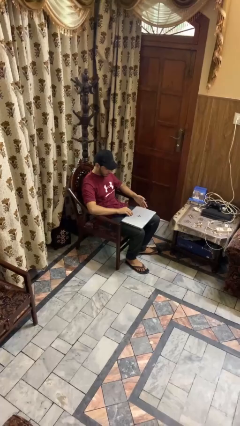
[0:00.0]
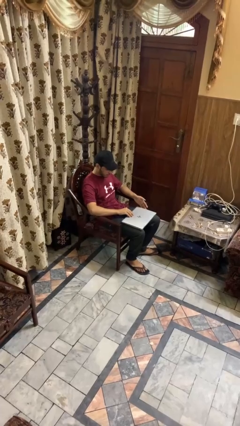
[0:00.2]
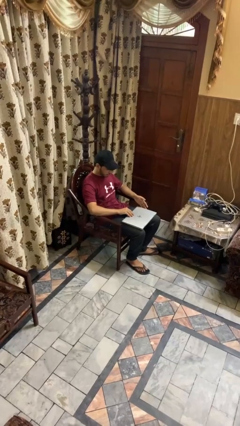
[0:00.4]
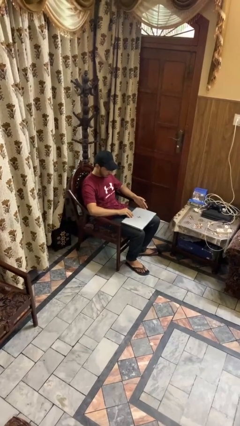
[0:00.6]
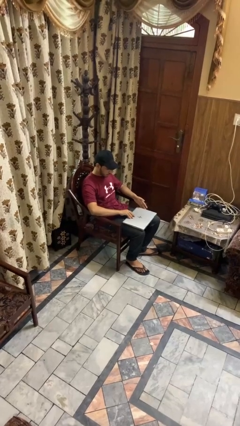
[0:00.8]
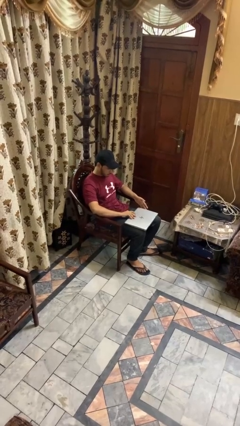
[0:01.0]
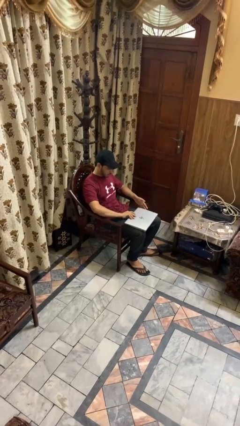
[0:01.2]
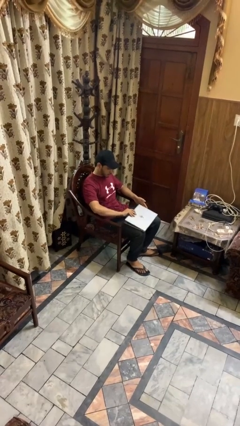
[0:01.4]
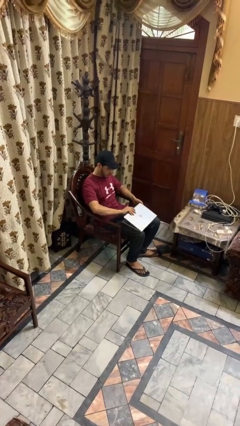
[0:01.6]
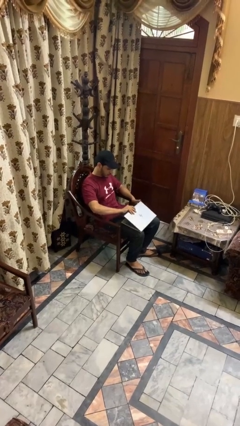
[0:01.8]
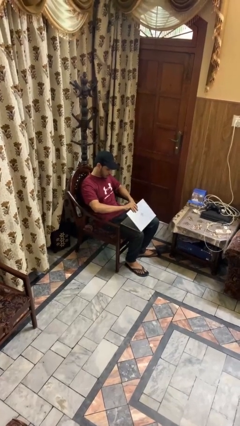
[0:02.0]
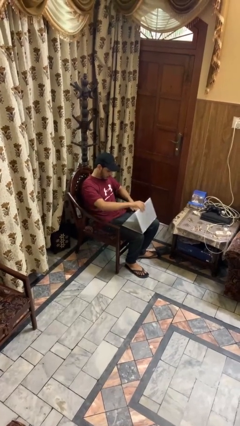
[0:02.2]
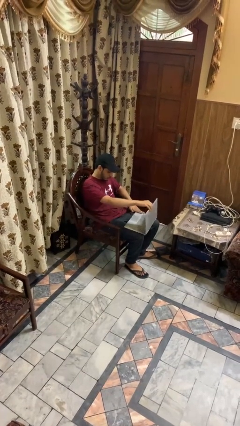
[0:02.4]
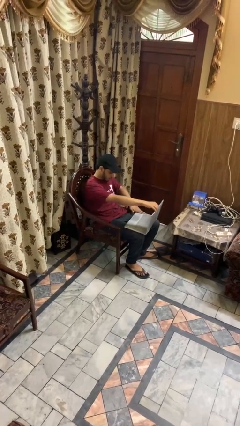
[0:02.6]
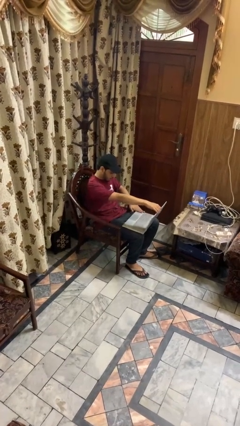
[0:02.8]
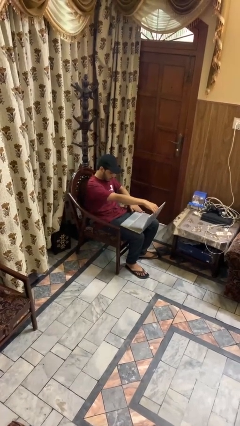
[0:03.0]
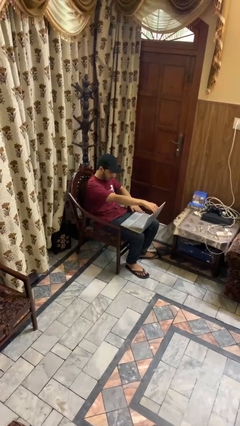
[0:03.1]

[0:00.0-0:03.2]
person opens laptop

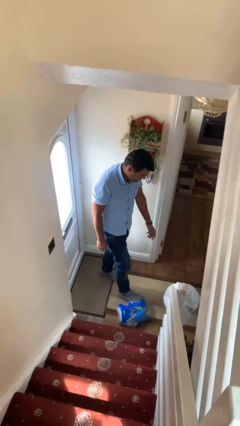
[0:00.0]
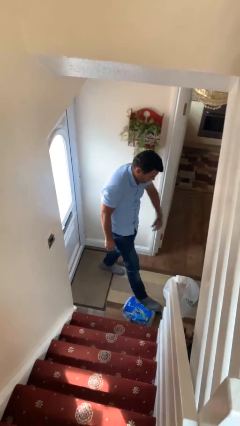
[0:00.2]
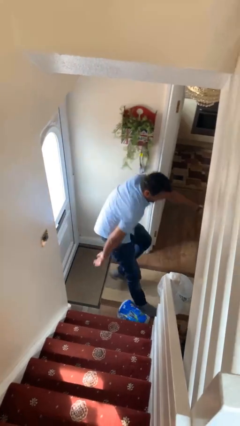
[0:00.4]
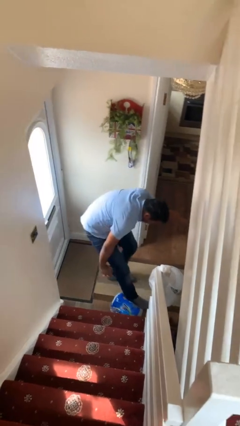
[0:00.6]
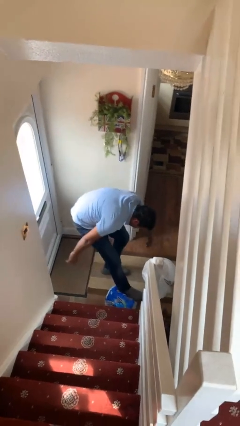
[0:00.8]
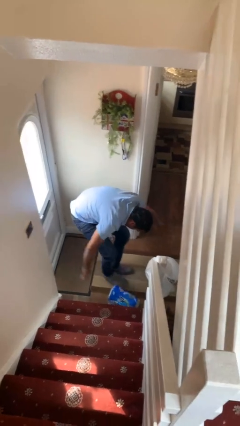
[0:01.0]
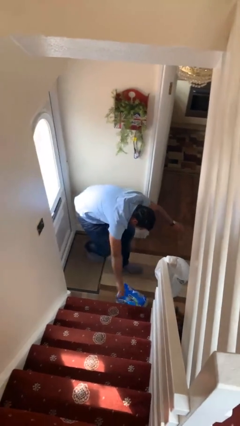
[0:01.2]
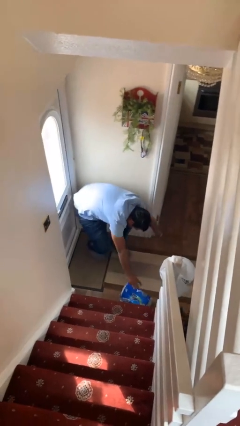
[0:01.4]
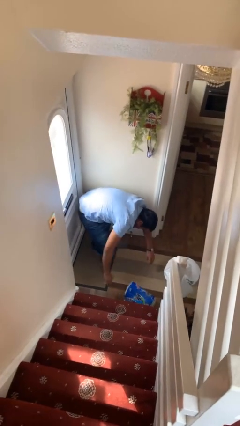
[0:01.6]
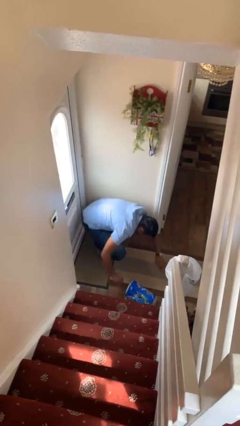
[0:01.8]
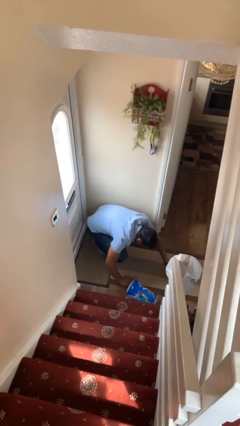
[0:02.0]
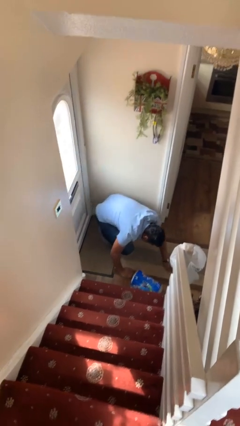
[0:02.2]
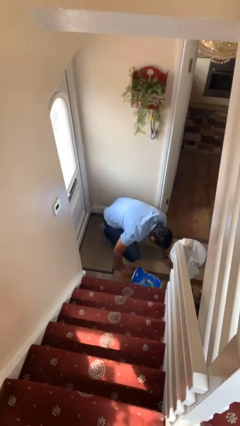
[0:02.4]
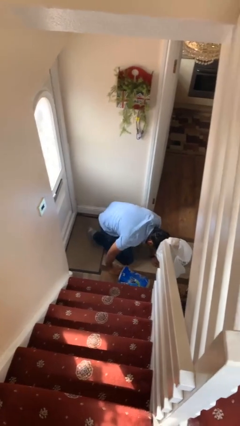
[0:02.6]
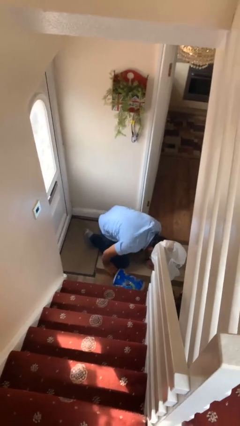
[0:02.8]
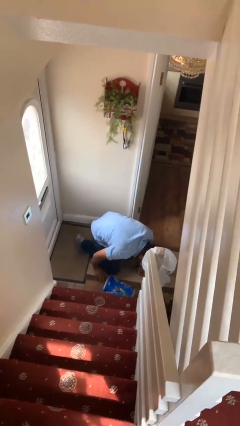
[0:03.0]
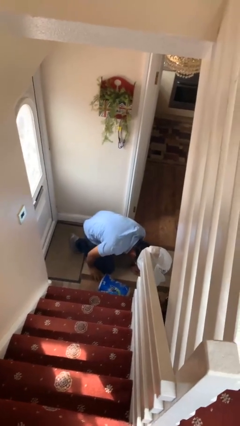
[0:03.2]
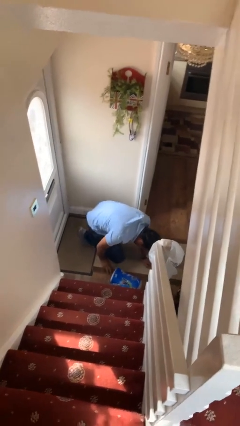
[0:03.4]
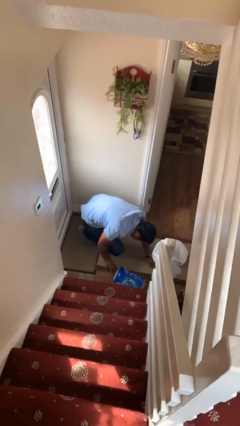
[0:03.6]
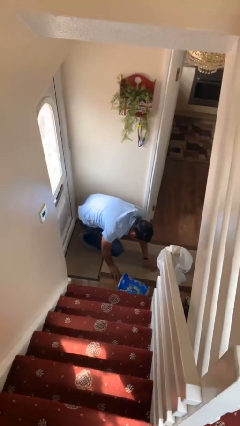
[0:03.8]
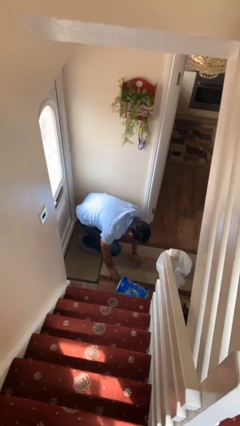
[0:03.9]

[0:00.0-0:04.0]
person trips on object on floor

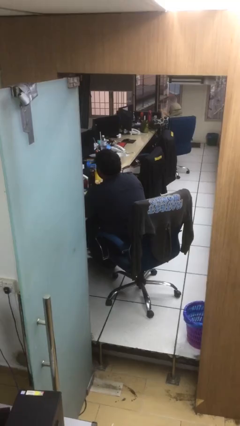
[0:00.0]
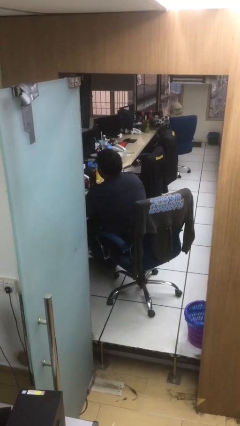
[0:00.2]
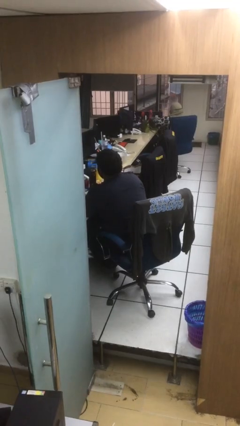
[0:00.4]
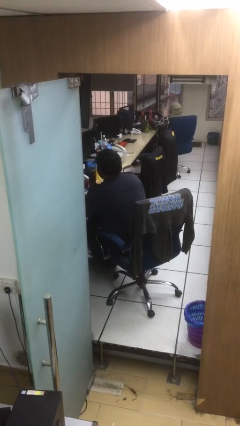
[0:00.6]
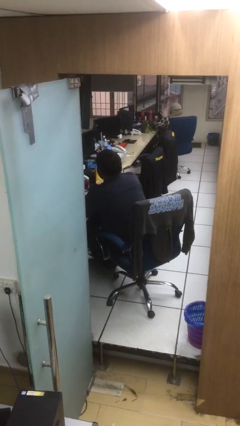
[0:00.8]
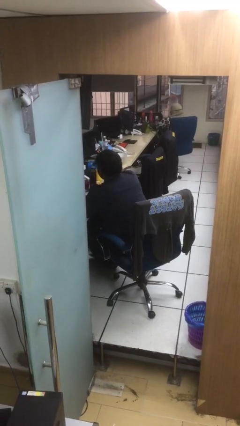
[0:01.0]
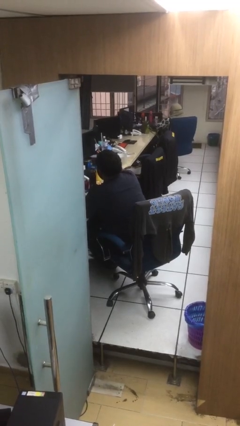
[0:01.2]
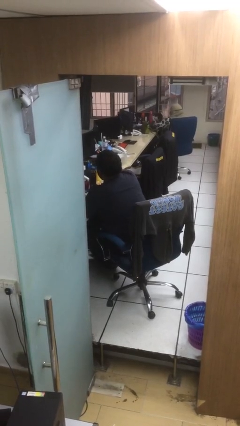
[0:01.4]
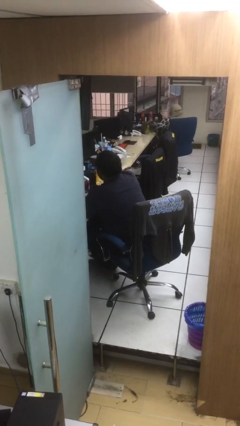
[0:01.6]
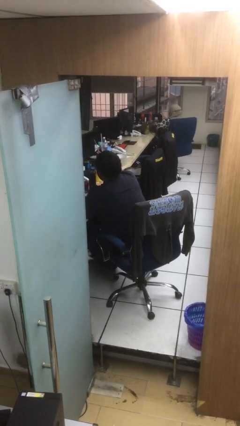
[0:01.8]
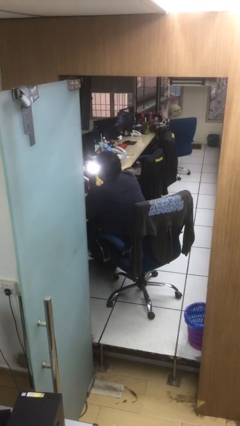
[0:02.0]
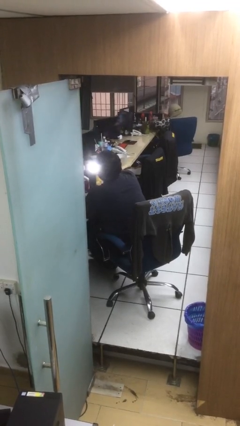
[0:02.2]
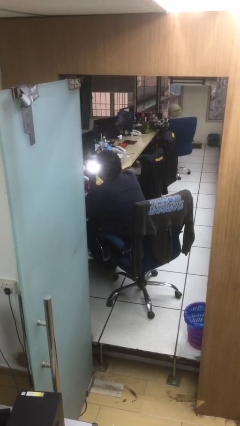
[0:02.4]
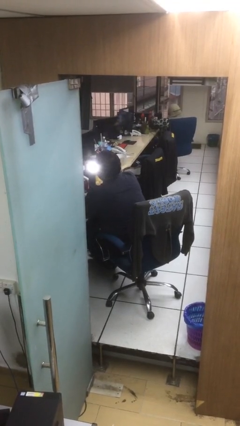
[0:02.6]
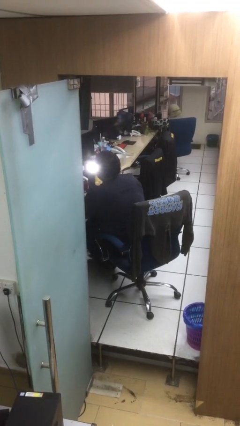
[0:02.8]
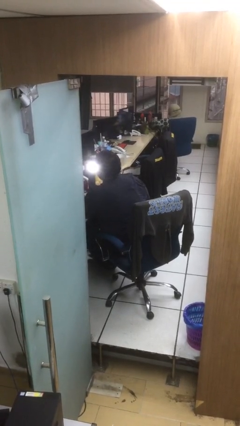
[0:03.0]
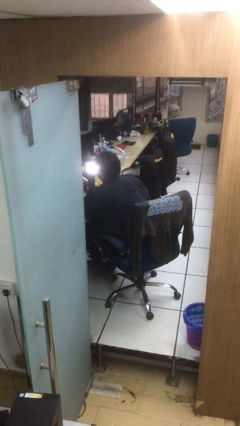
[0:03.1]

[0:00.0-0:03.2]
person turns on lamp

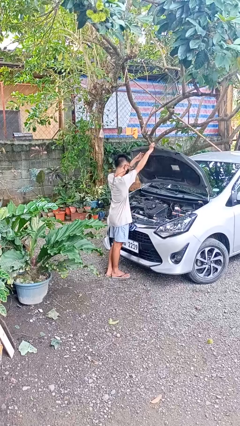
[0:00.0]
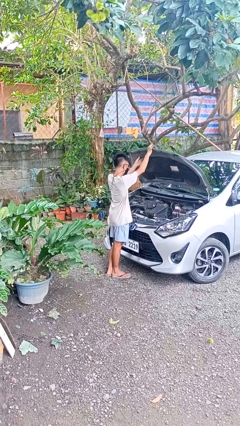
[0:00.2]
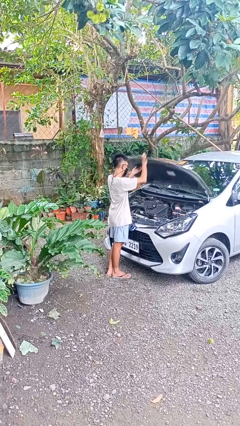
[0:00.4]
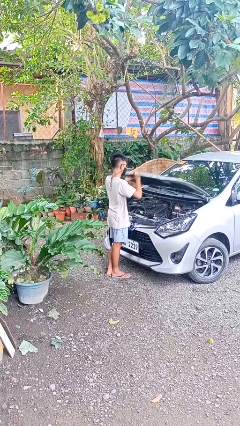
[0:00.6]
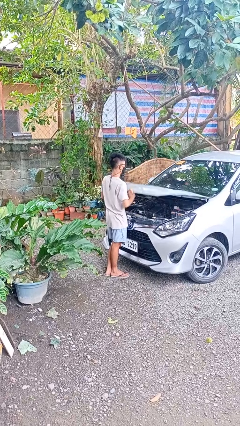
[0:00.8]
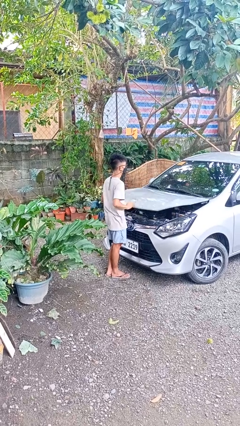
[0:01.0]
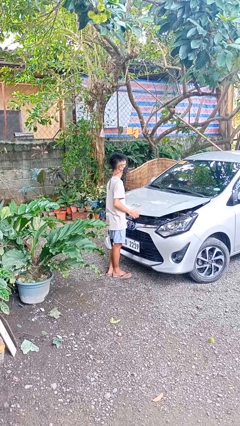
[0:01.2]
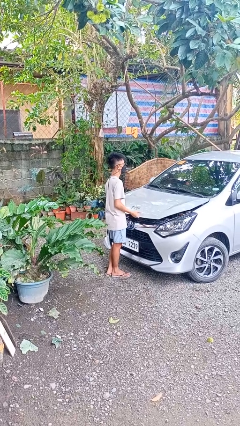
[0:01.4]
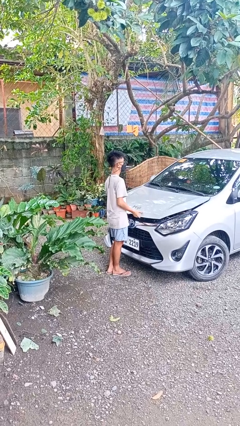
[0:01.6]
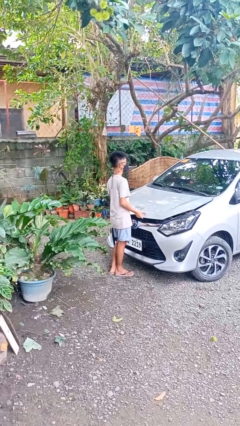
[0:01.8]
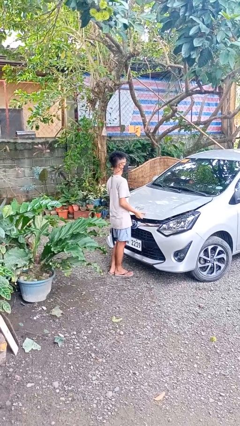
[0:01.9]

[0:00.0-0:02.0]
person closes car hood

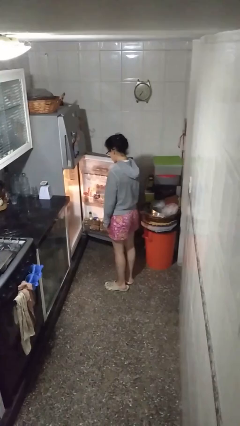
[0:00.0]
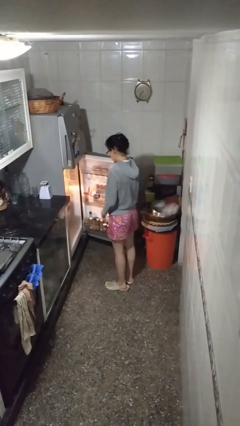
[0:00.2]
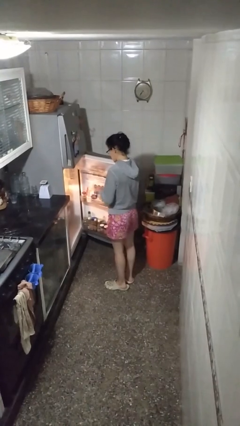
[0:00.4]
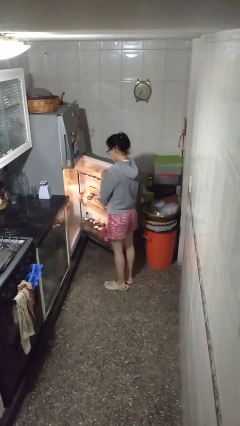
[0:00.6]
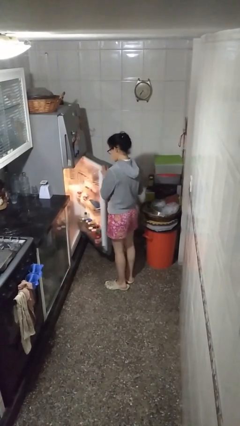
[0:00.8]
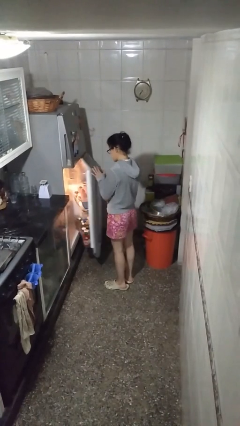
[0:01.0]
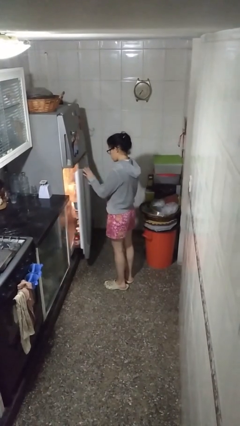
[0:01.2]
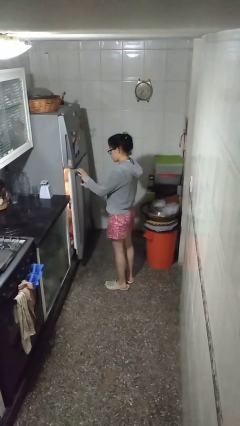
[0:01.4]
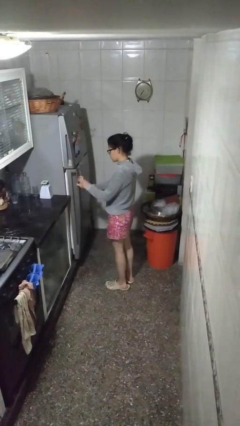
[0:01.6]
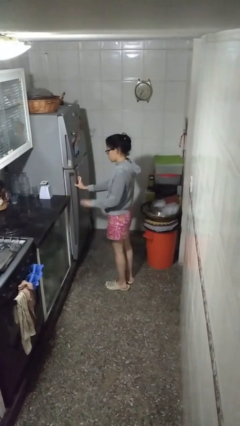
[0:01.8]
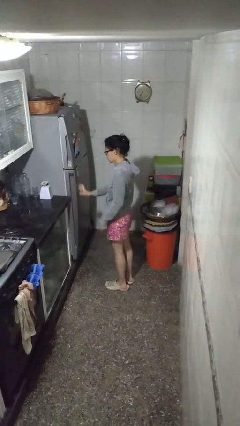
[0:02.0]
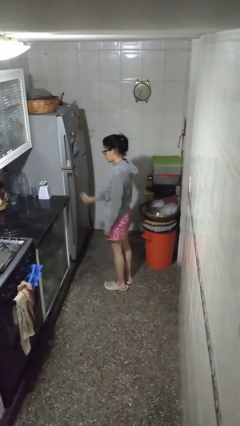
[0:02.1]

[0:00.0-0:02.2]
person closes refrigerator

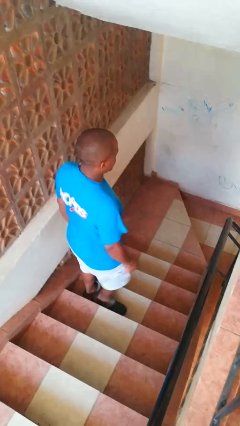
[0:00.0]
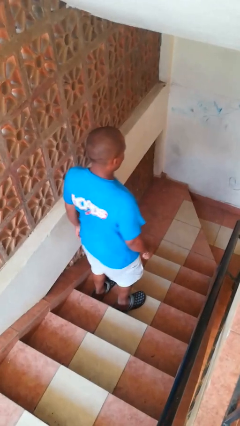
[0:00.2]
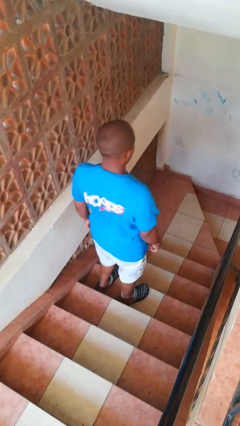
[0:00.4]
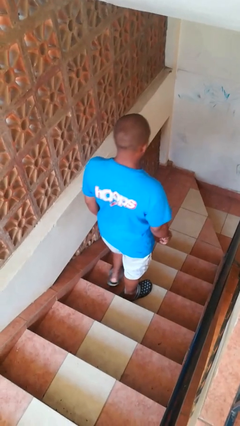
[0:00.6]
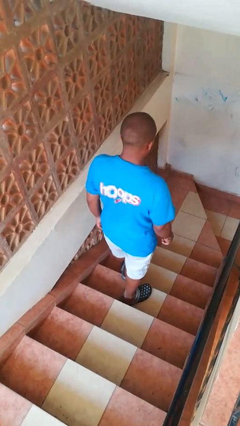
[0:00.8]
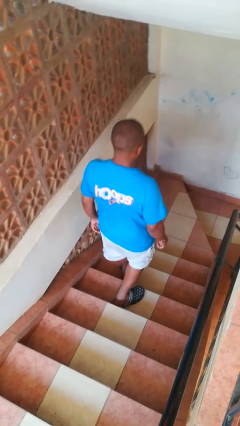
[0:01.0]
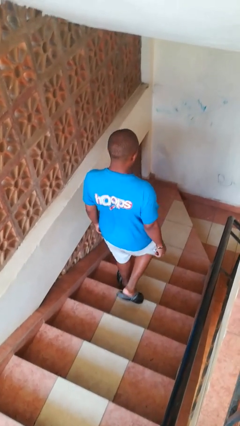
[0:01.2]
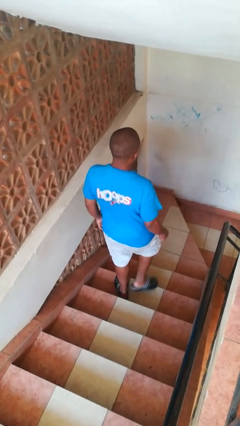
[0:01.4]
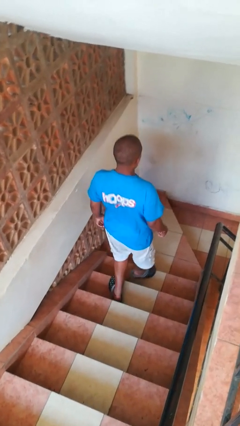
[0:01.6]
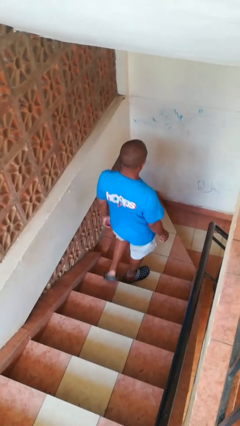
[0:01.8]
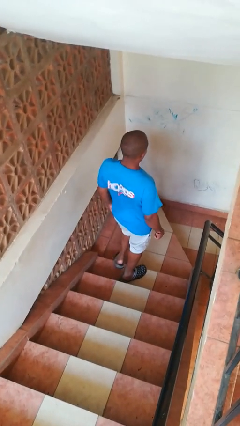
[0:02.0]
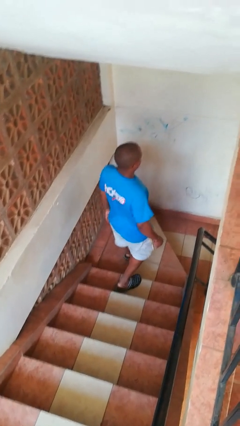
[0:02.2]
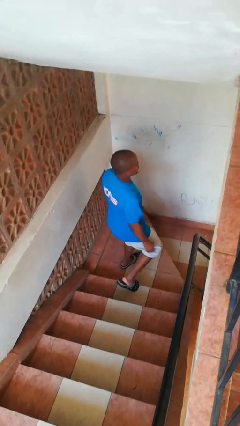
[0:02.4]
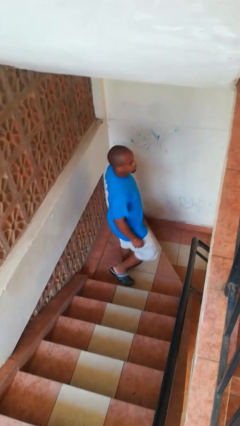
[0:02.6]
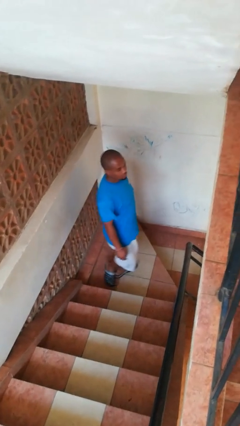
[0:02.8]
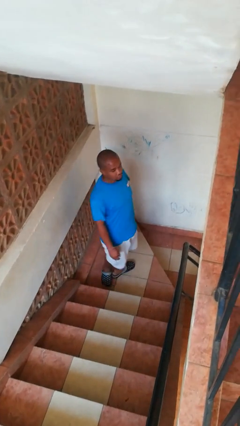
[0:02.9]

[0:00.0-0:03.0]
person climbs down stairs
